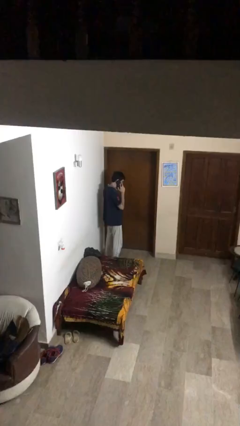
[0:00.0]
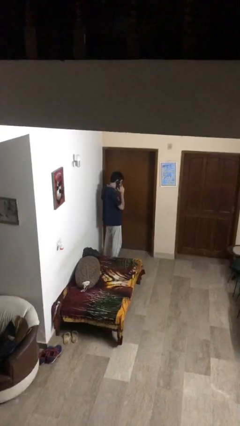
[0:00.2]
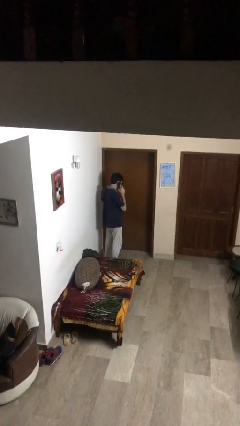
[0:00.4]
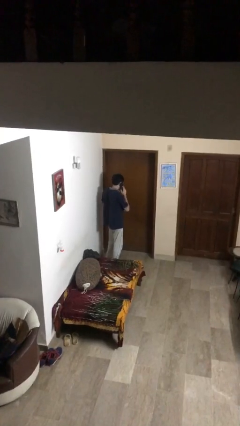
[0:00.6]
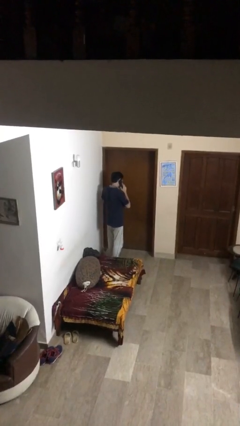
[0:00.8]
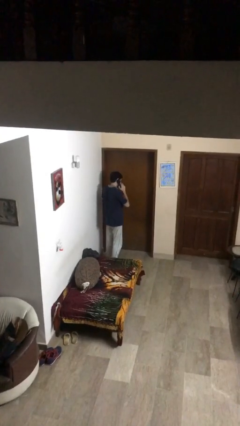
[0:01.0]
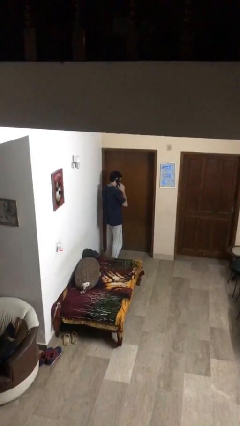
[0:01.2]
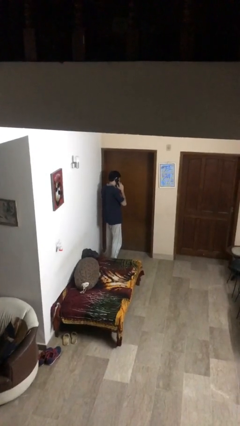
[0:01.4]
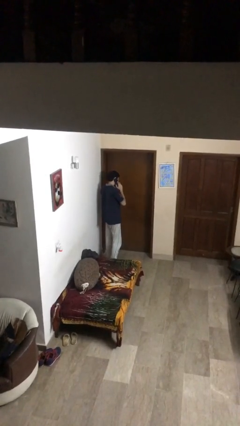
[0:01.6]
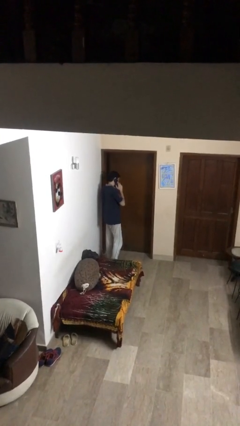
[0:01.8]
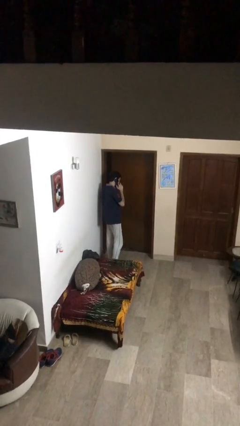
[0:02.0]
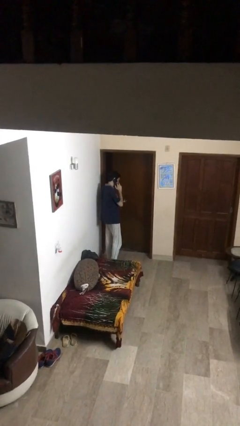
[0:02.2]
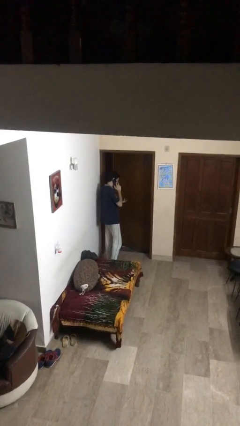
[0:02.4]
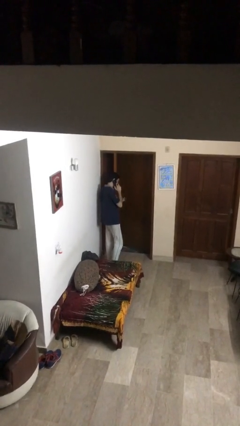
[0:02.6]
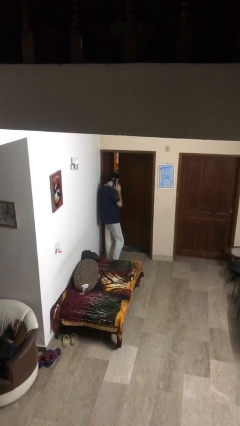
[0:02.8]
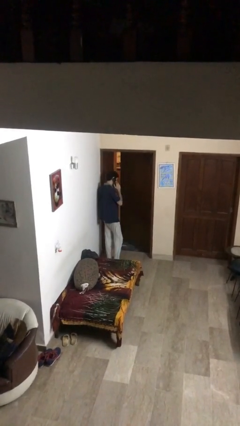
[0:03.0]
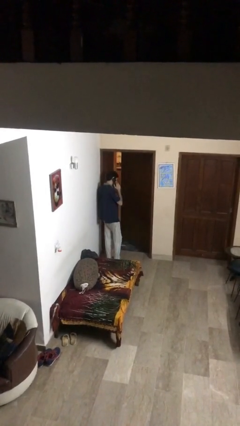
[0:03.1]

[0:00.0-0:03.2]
person opens facility door

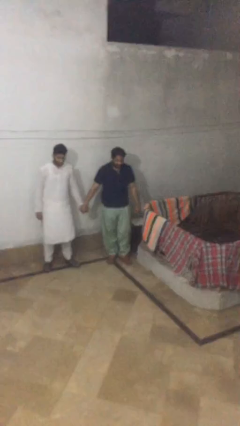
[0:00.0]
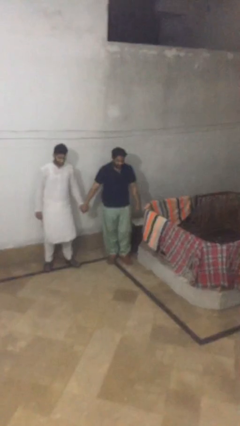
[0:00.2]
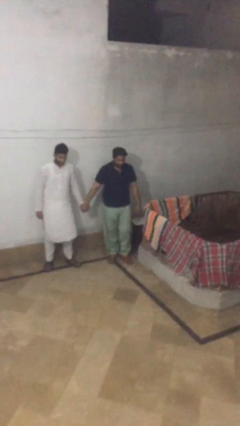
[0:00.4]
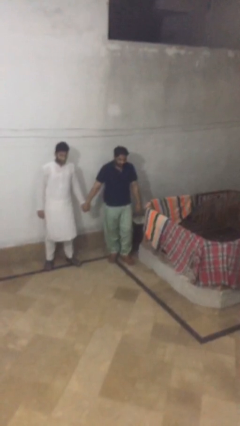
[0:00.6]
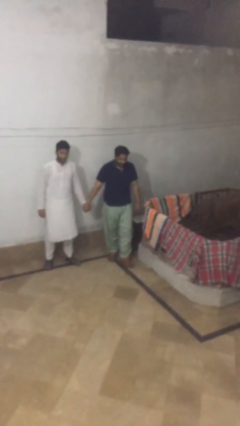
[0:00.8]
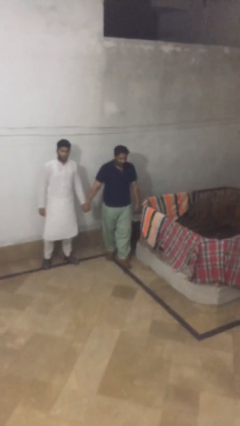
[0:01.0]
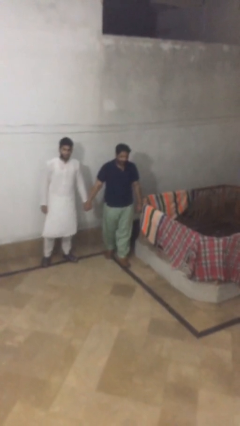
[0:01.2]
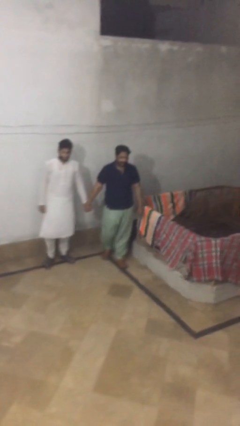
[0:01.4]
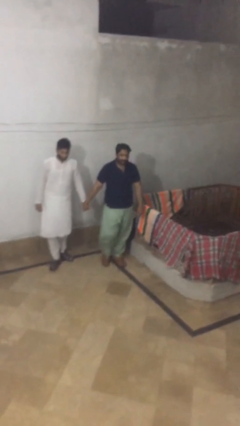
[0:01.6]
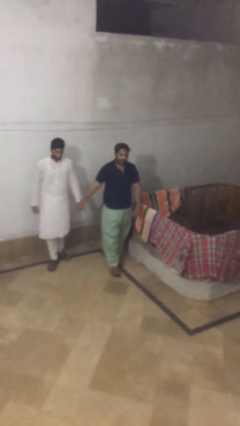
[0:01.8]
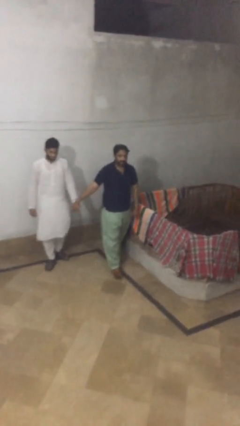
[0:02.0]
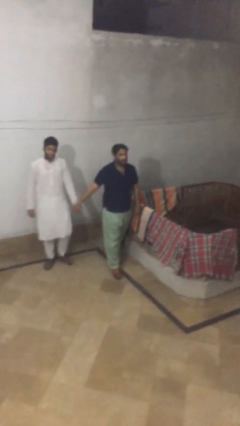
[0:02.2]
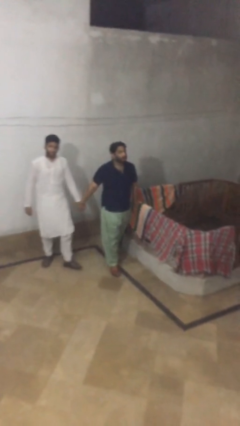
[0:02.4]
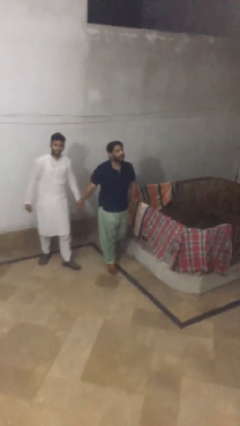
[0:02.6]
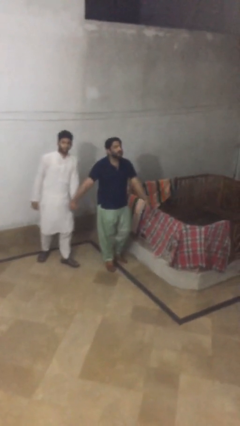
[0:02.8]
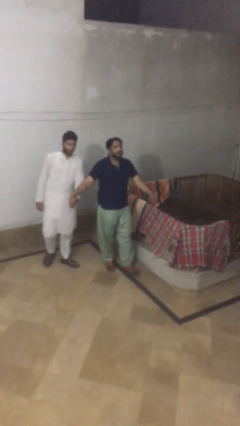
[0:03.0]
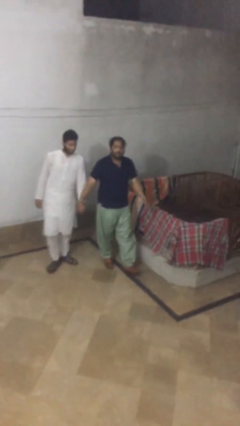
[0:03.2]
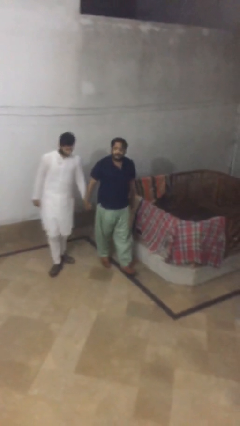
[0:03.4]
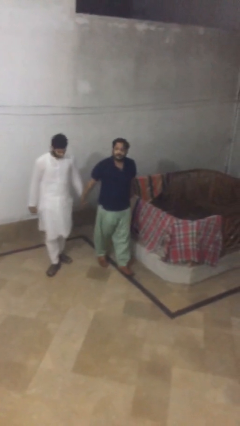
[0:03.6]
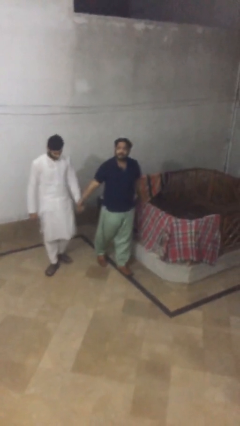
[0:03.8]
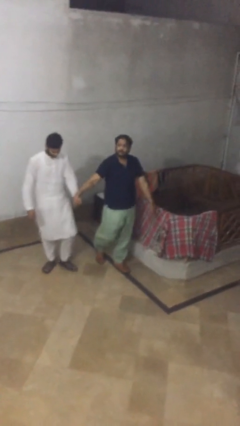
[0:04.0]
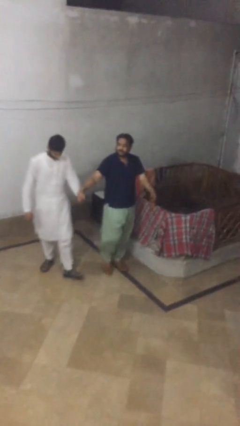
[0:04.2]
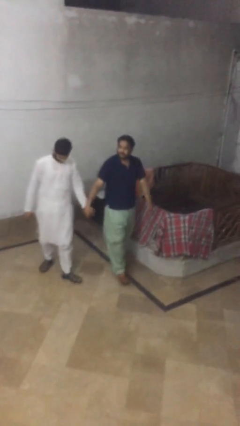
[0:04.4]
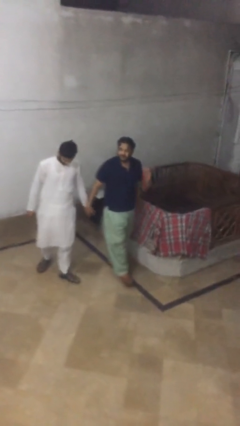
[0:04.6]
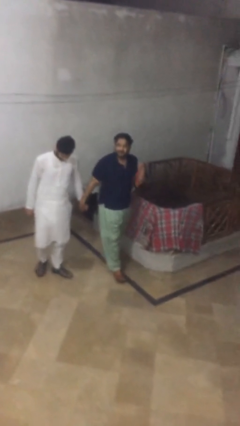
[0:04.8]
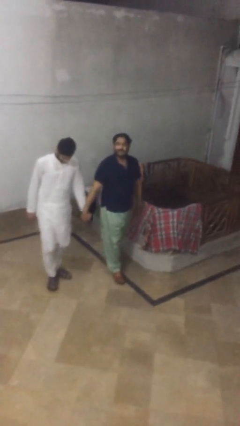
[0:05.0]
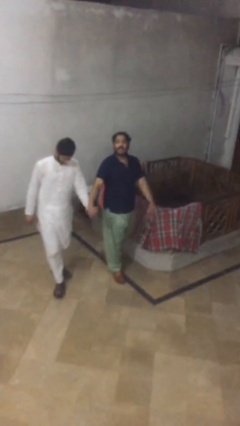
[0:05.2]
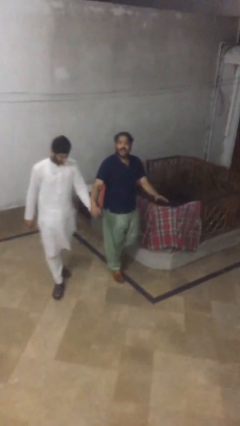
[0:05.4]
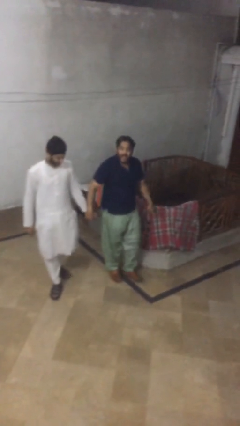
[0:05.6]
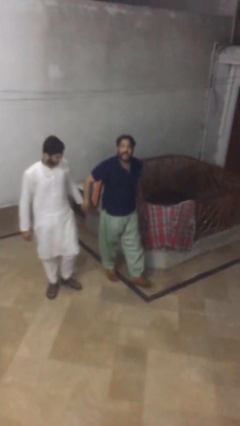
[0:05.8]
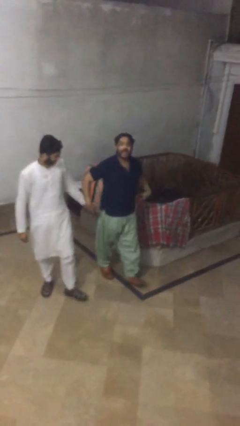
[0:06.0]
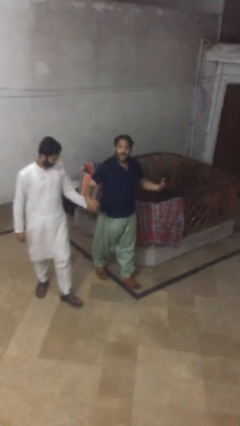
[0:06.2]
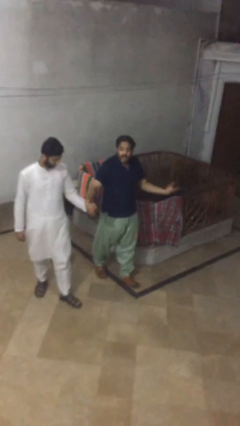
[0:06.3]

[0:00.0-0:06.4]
person holds hand

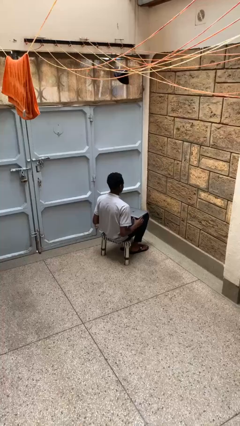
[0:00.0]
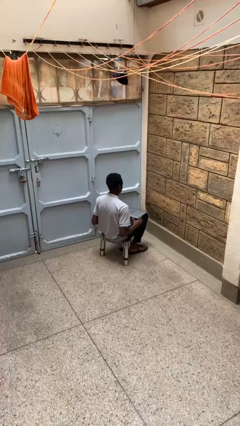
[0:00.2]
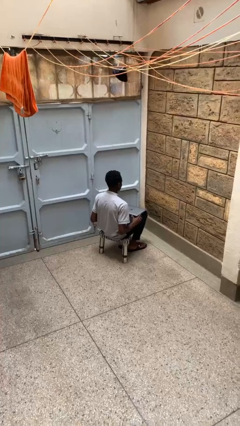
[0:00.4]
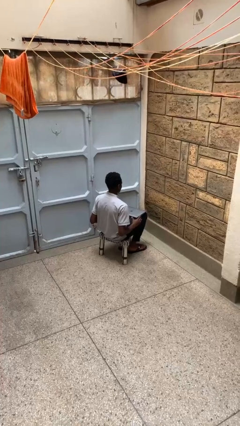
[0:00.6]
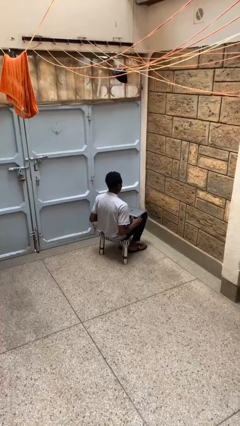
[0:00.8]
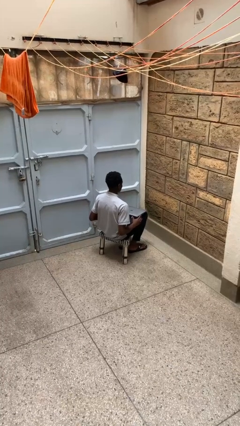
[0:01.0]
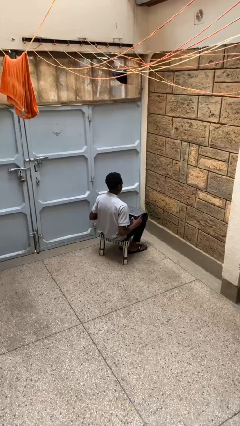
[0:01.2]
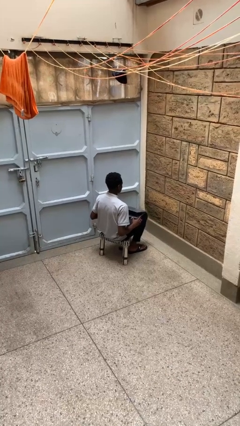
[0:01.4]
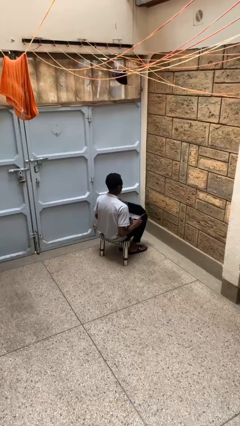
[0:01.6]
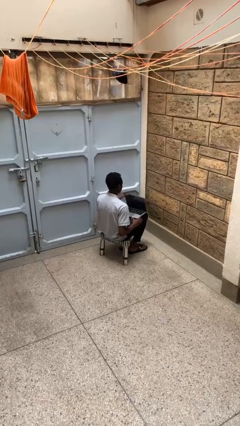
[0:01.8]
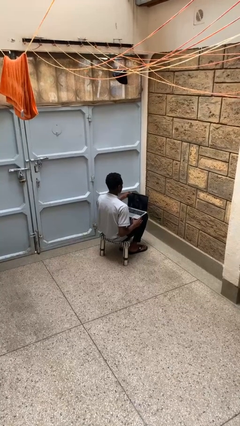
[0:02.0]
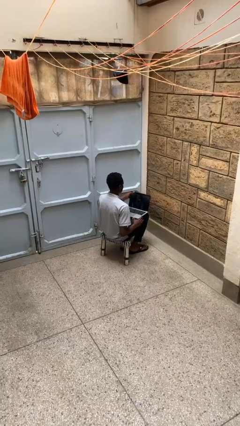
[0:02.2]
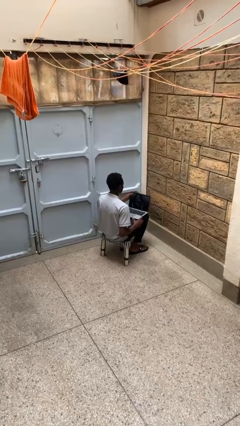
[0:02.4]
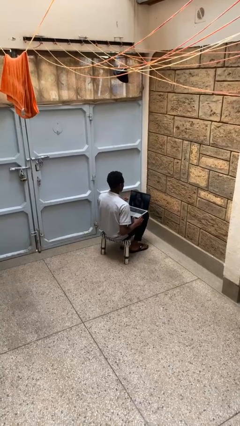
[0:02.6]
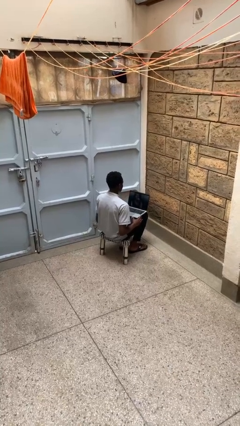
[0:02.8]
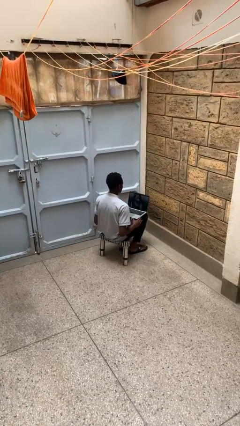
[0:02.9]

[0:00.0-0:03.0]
person opens laptop

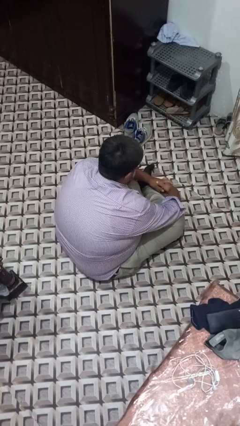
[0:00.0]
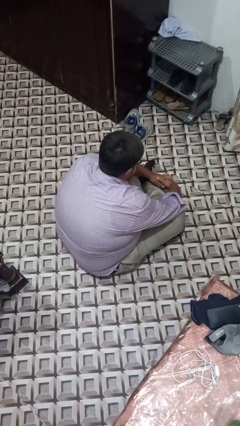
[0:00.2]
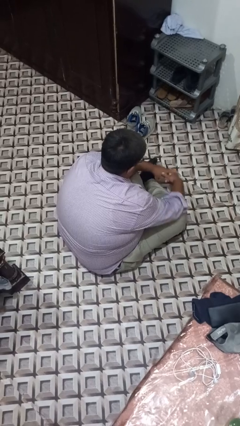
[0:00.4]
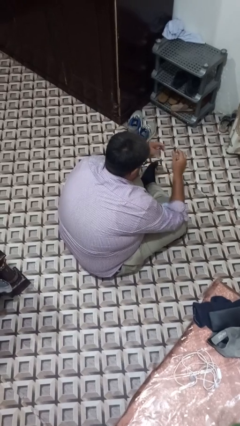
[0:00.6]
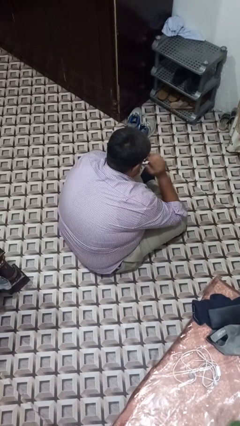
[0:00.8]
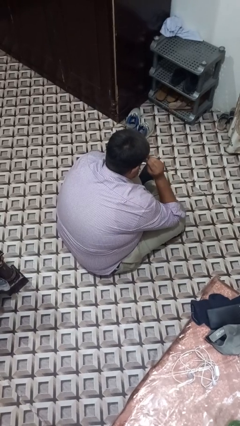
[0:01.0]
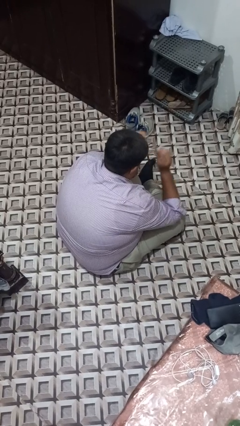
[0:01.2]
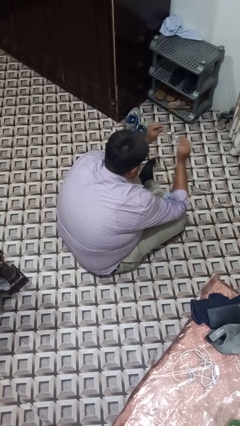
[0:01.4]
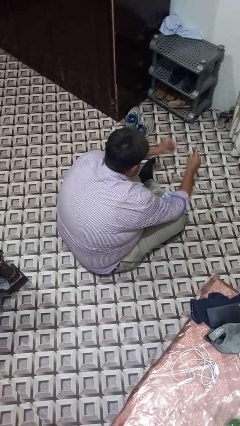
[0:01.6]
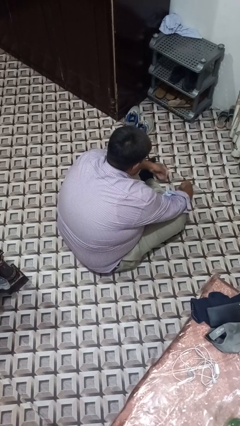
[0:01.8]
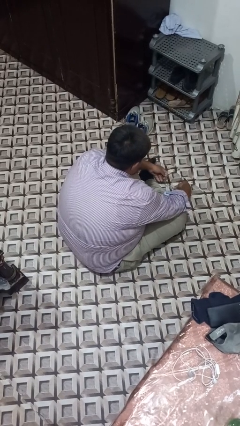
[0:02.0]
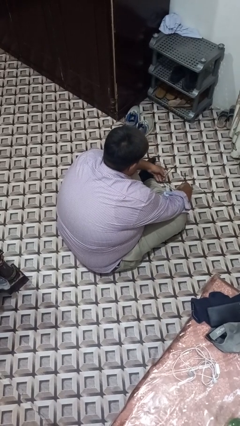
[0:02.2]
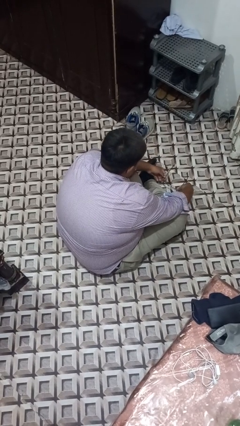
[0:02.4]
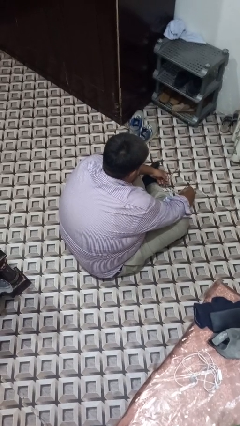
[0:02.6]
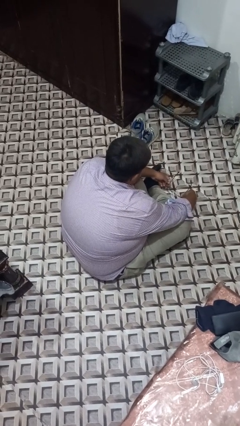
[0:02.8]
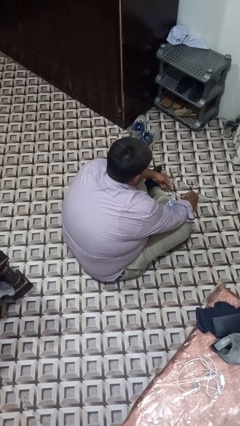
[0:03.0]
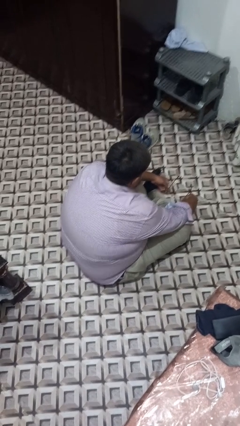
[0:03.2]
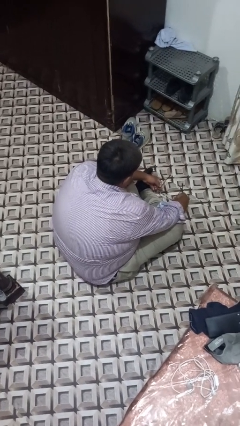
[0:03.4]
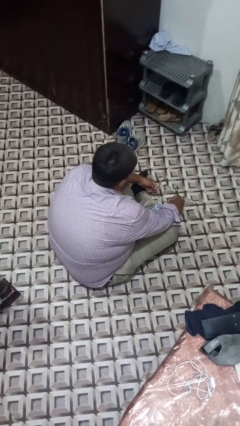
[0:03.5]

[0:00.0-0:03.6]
person takes off glasses

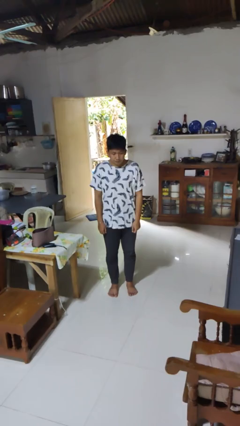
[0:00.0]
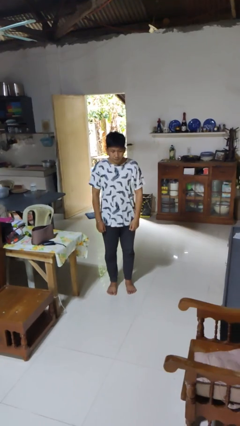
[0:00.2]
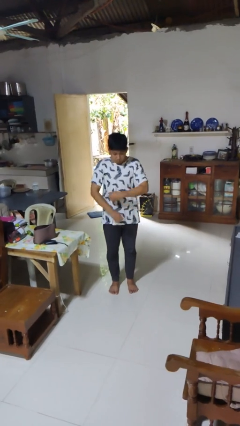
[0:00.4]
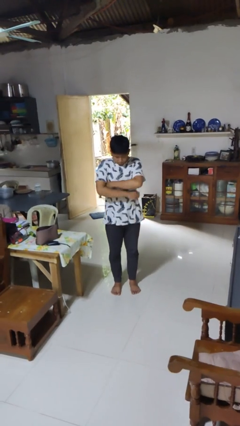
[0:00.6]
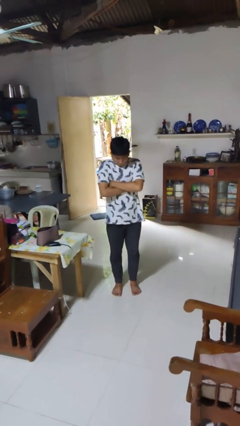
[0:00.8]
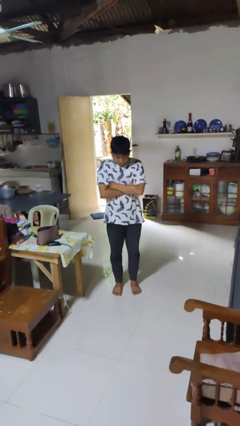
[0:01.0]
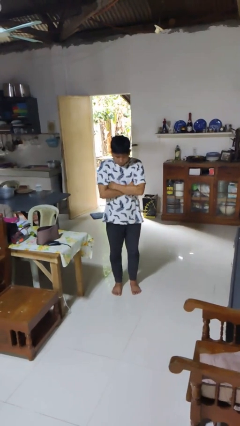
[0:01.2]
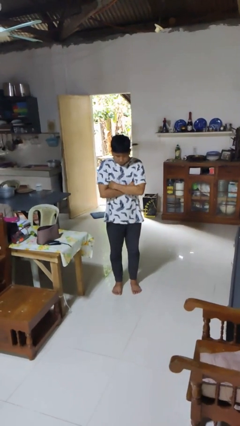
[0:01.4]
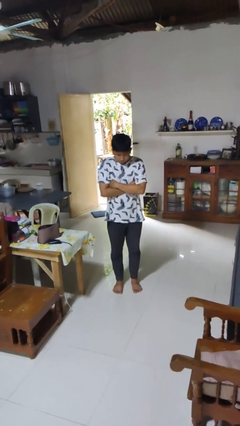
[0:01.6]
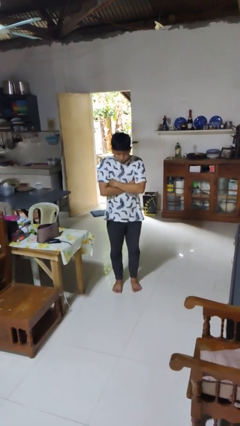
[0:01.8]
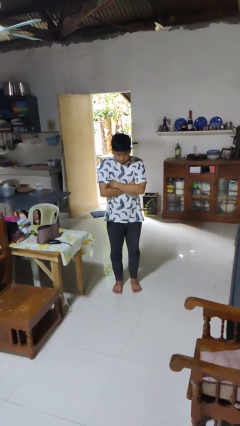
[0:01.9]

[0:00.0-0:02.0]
person gestures arms x
